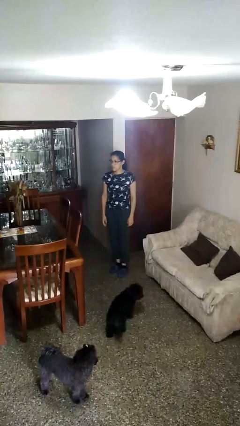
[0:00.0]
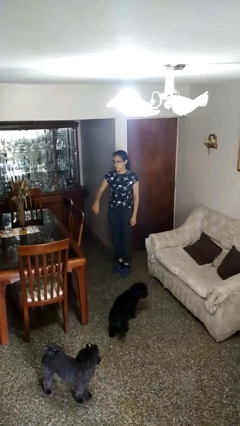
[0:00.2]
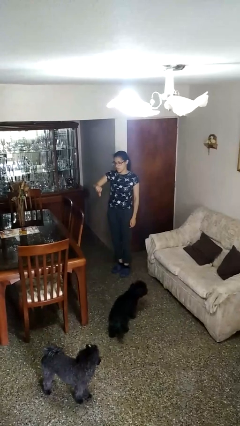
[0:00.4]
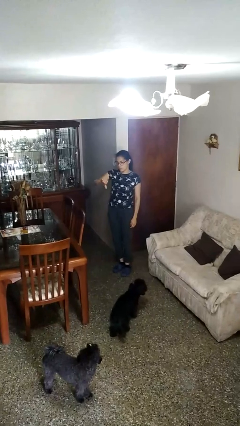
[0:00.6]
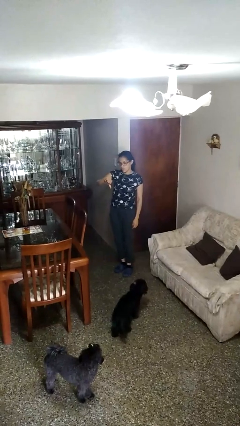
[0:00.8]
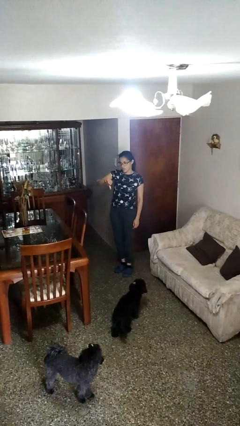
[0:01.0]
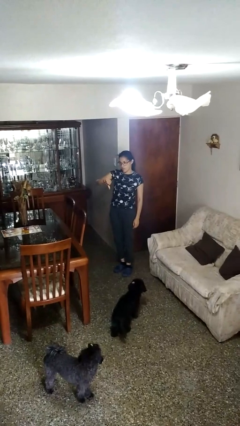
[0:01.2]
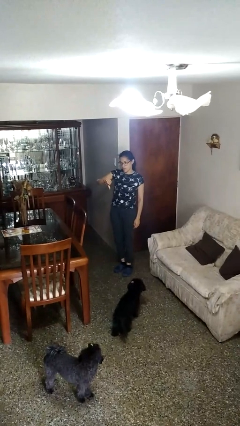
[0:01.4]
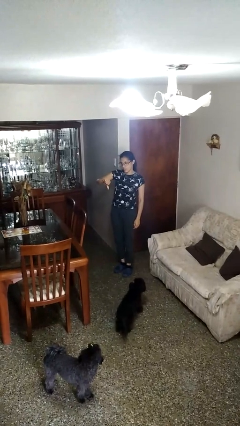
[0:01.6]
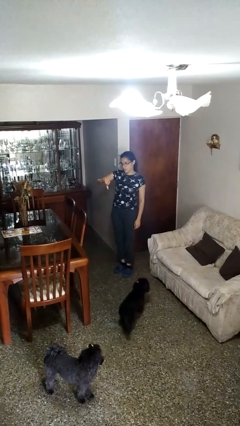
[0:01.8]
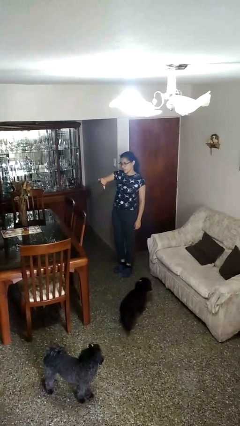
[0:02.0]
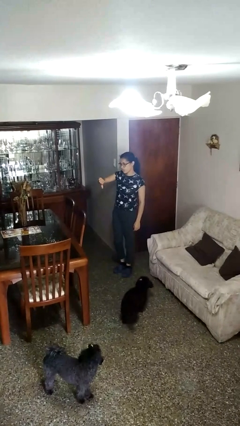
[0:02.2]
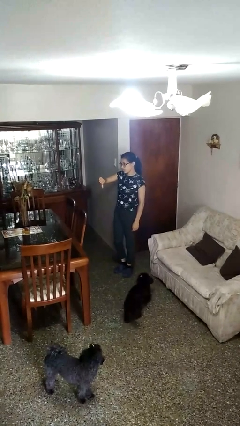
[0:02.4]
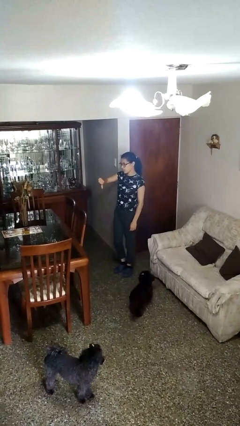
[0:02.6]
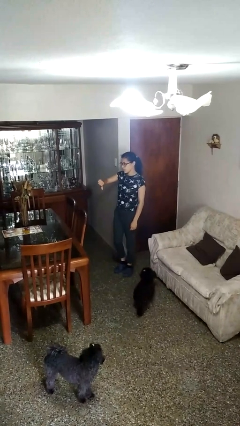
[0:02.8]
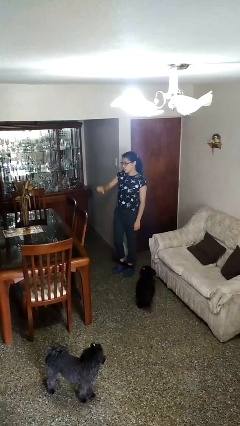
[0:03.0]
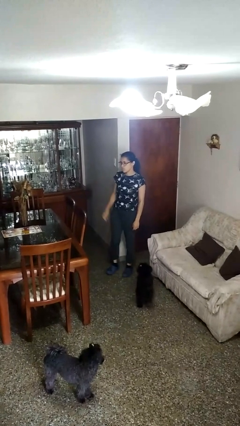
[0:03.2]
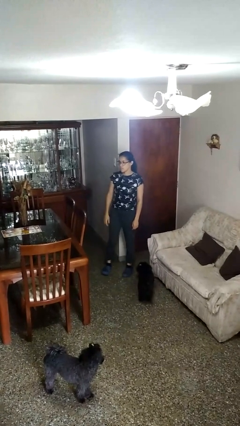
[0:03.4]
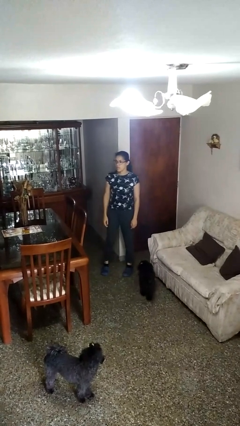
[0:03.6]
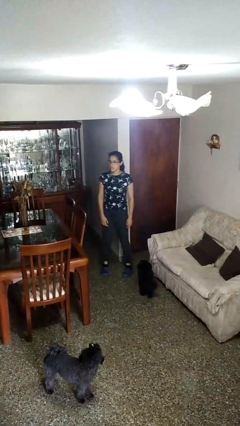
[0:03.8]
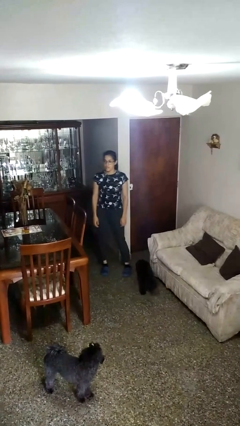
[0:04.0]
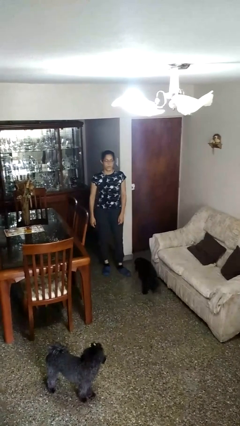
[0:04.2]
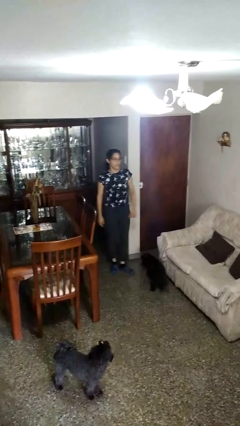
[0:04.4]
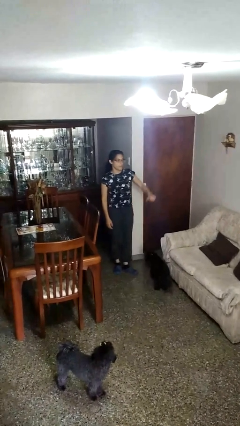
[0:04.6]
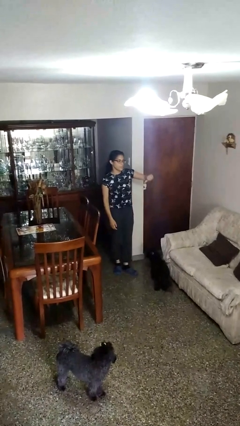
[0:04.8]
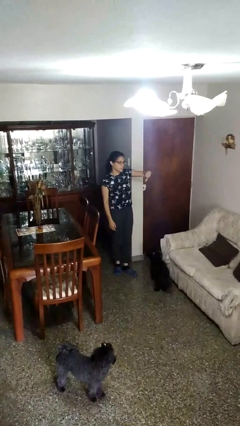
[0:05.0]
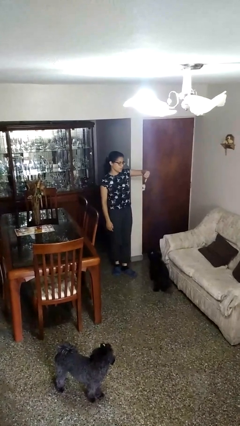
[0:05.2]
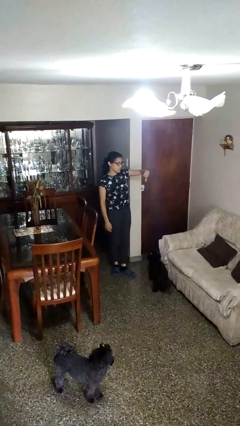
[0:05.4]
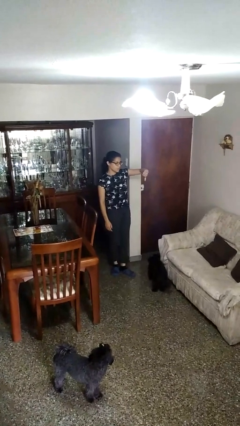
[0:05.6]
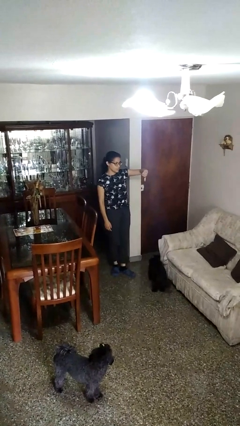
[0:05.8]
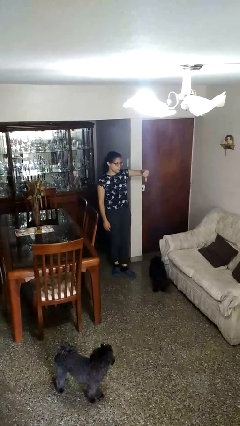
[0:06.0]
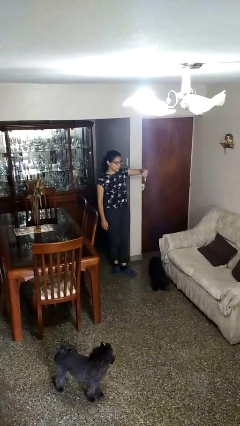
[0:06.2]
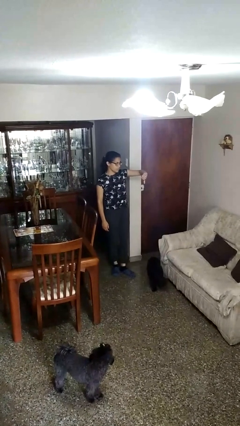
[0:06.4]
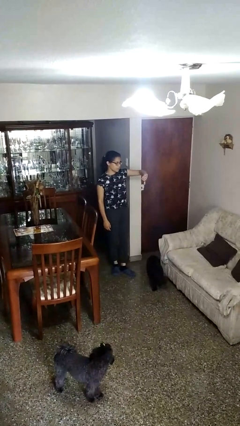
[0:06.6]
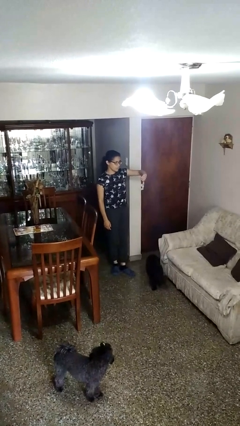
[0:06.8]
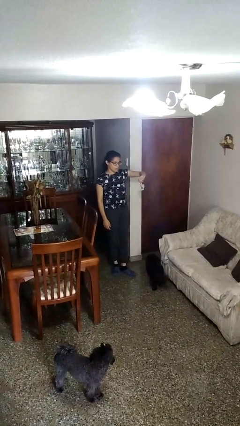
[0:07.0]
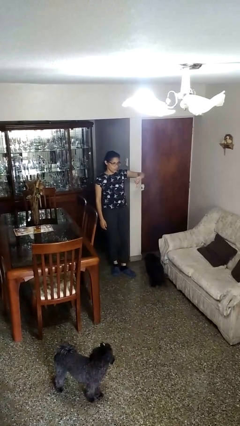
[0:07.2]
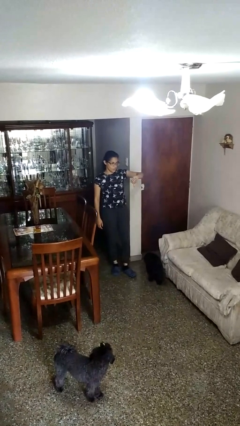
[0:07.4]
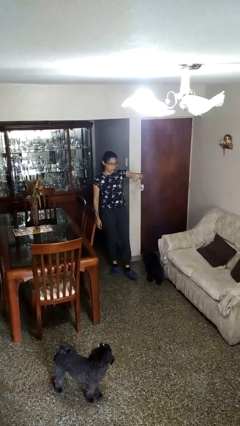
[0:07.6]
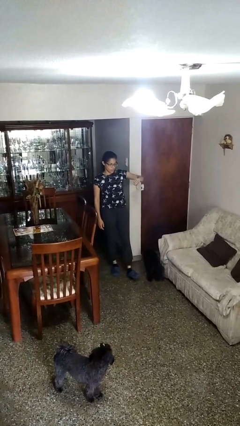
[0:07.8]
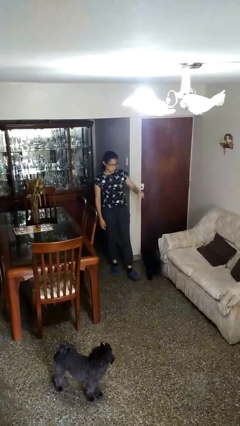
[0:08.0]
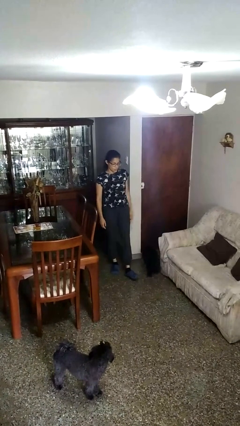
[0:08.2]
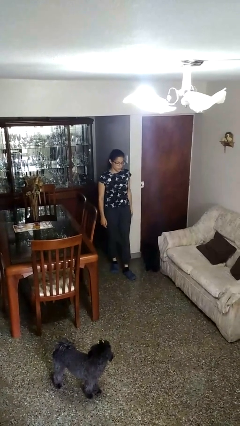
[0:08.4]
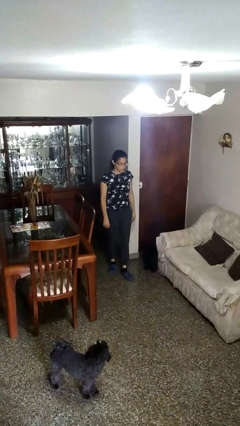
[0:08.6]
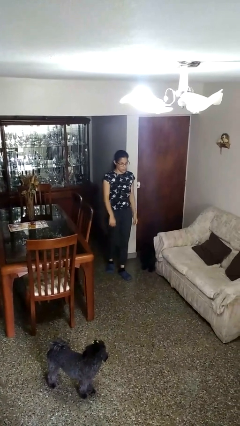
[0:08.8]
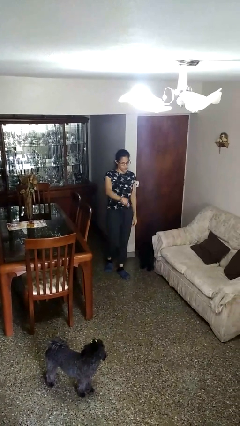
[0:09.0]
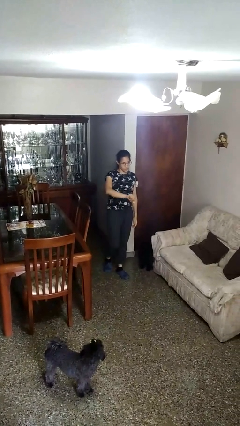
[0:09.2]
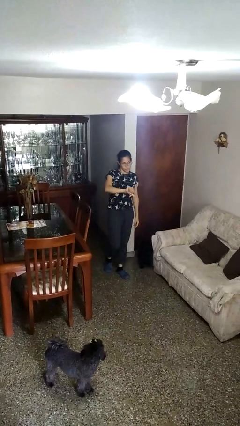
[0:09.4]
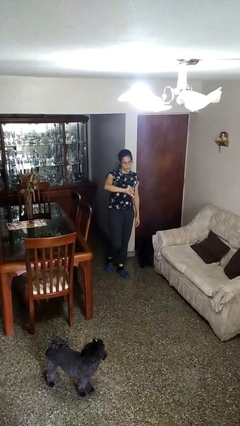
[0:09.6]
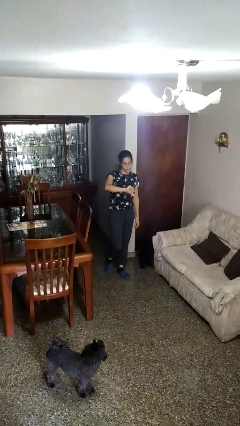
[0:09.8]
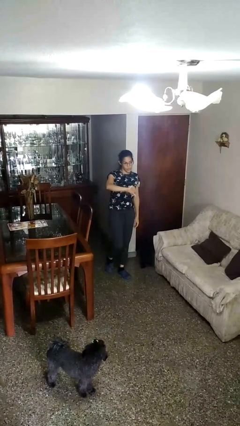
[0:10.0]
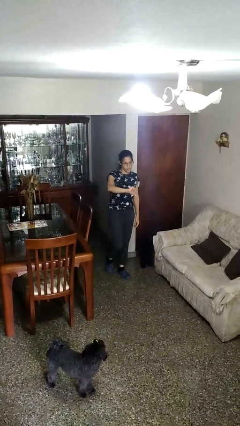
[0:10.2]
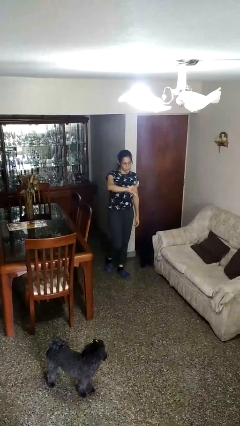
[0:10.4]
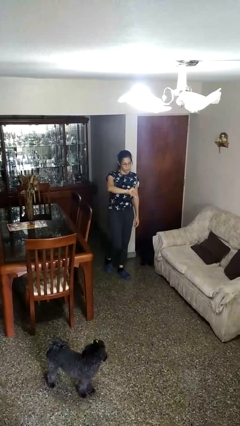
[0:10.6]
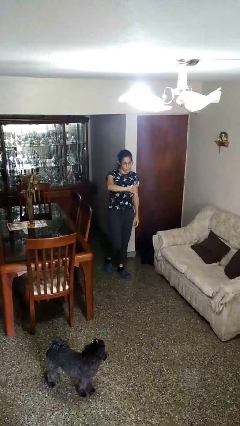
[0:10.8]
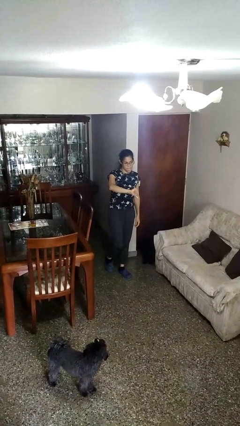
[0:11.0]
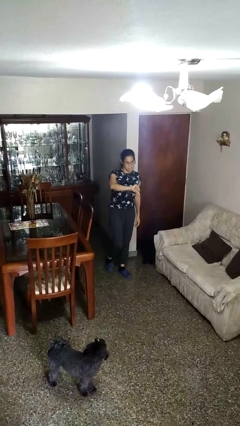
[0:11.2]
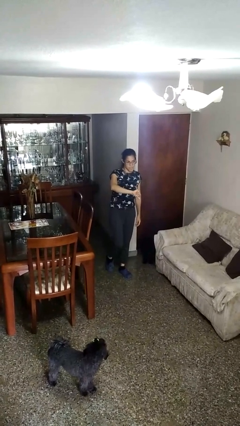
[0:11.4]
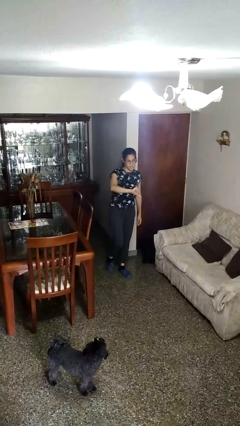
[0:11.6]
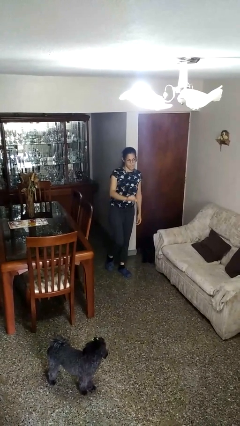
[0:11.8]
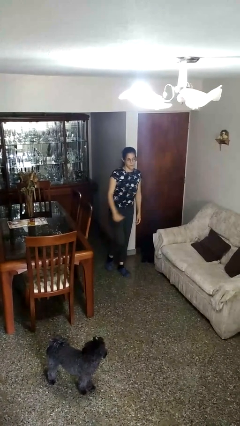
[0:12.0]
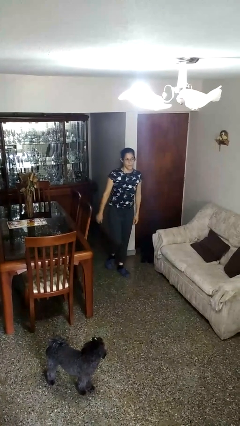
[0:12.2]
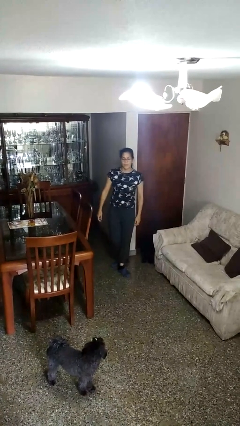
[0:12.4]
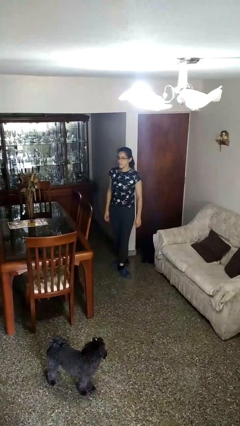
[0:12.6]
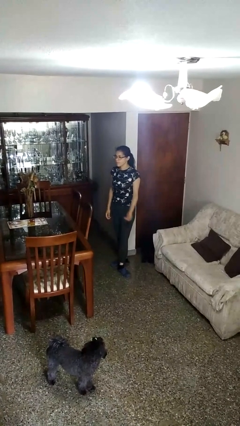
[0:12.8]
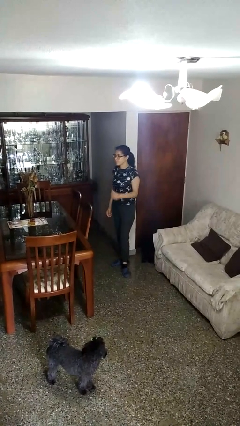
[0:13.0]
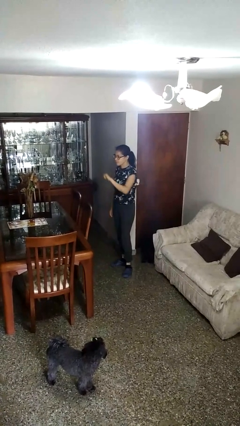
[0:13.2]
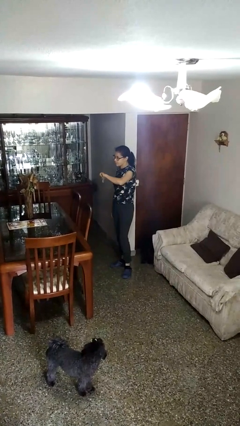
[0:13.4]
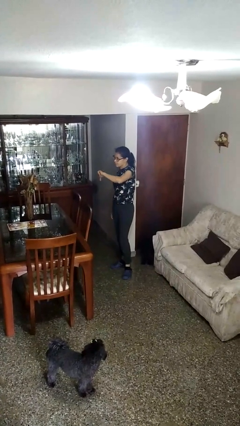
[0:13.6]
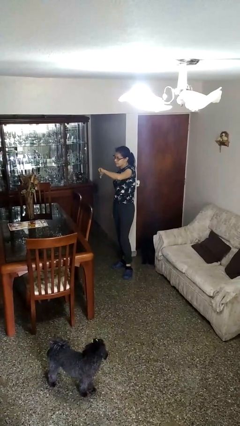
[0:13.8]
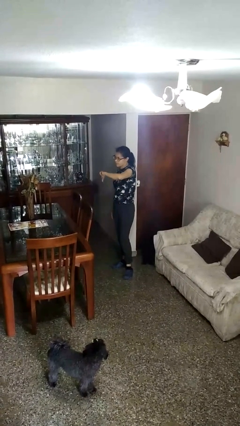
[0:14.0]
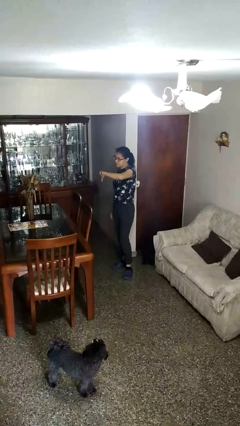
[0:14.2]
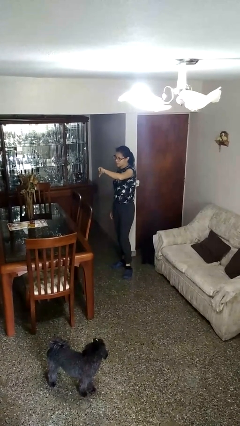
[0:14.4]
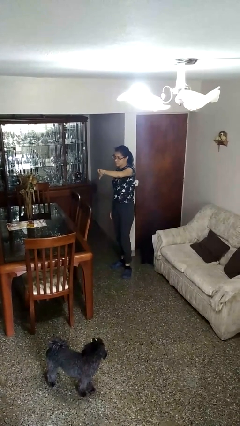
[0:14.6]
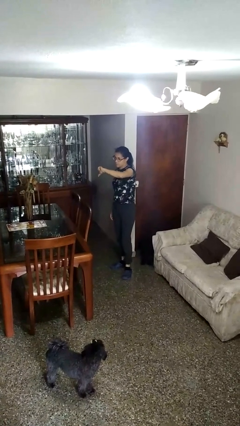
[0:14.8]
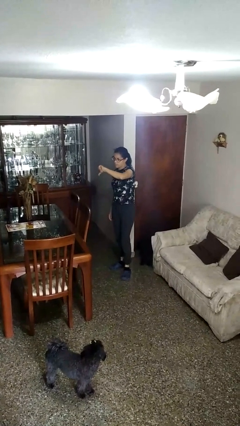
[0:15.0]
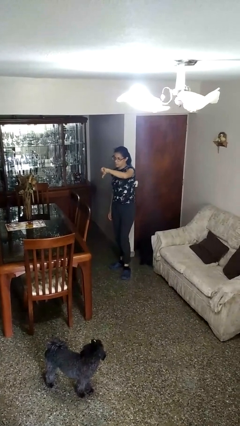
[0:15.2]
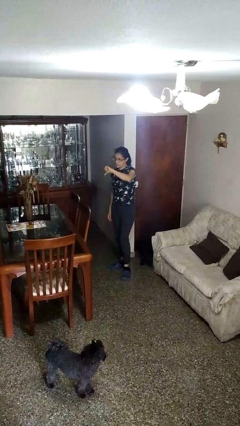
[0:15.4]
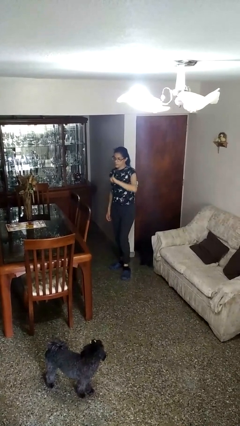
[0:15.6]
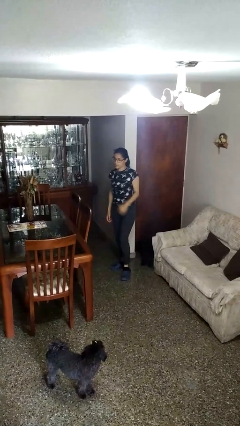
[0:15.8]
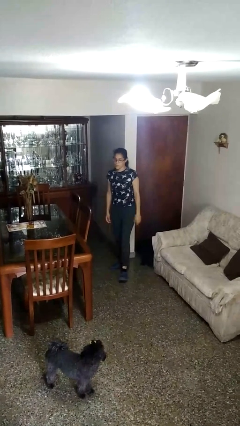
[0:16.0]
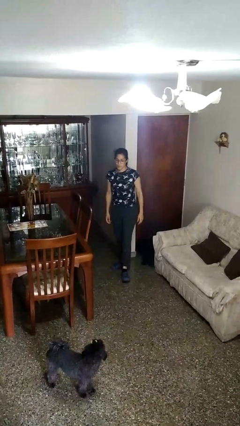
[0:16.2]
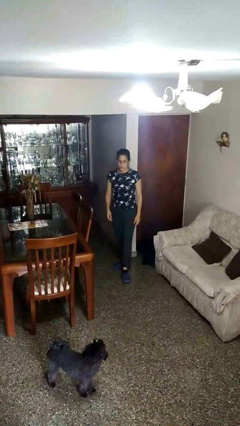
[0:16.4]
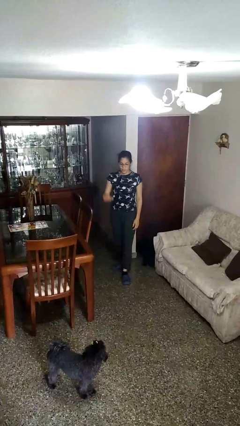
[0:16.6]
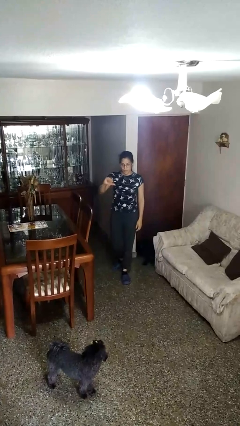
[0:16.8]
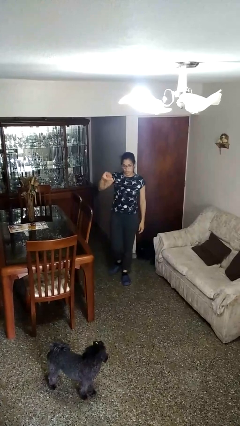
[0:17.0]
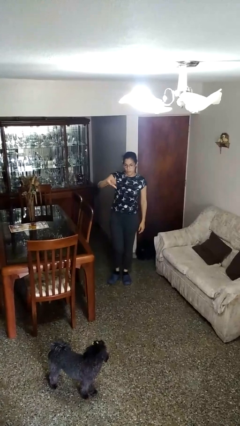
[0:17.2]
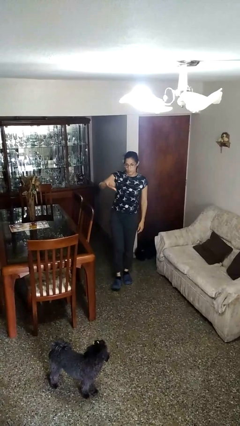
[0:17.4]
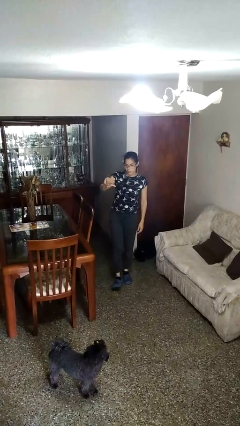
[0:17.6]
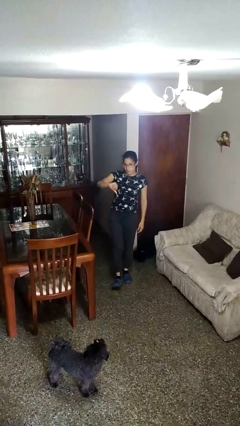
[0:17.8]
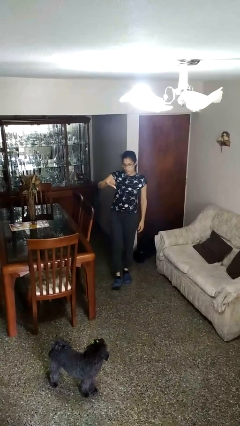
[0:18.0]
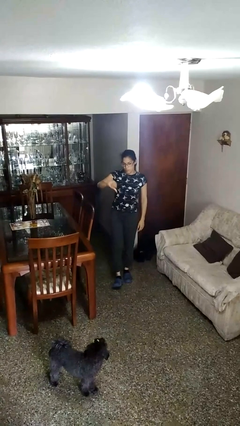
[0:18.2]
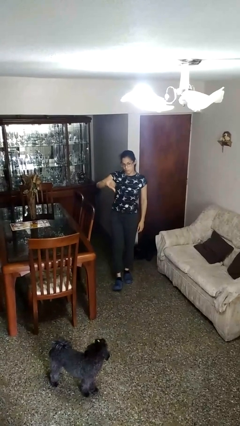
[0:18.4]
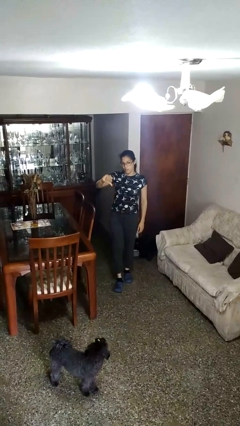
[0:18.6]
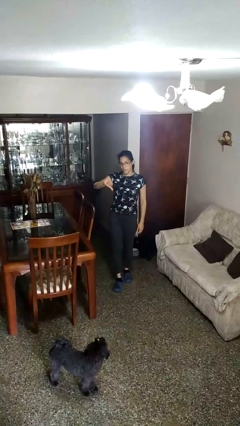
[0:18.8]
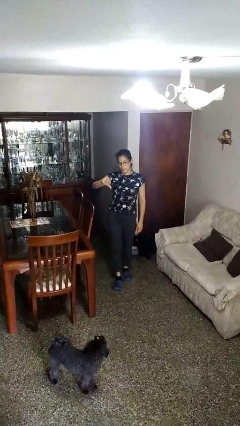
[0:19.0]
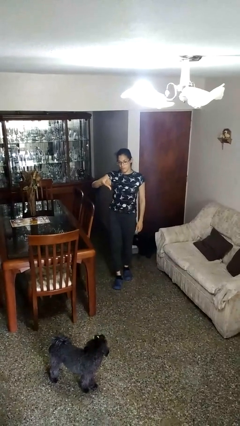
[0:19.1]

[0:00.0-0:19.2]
person gestures thumbs down
